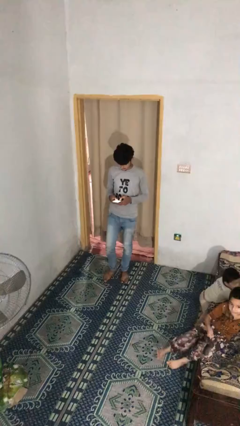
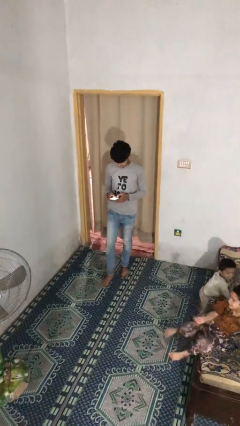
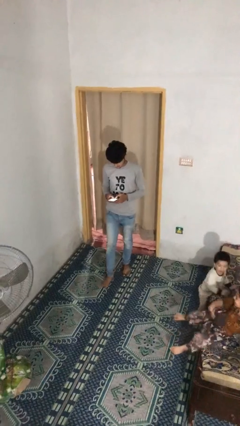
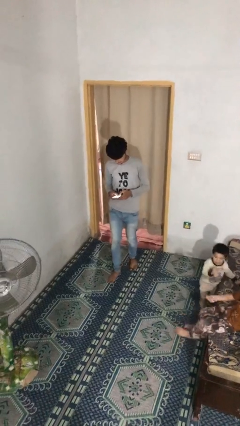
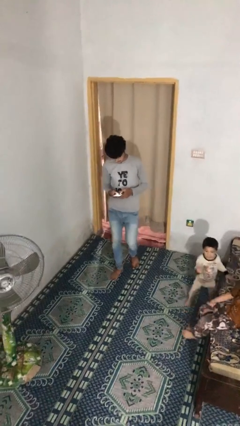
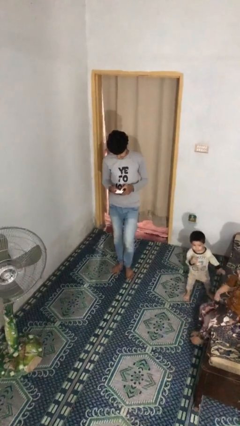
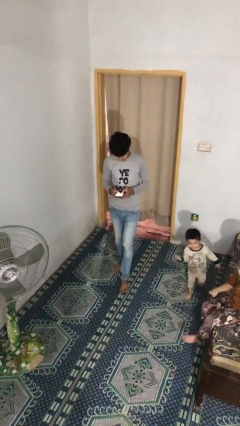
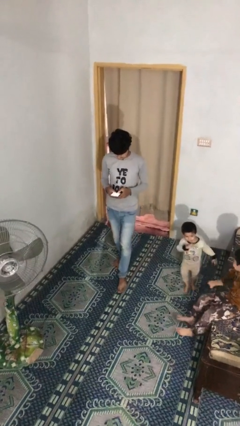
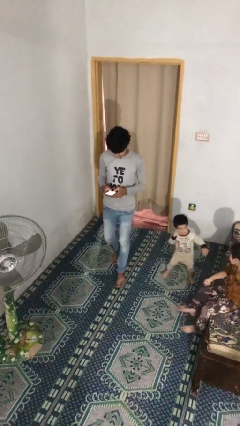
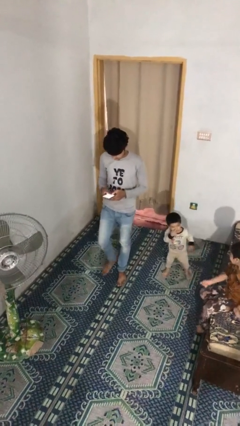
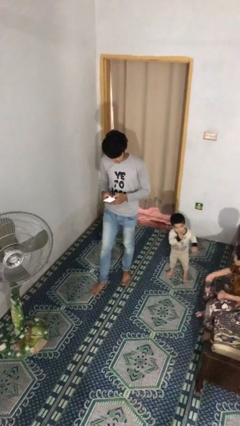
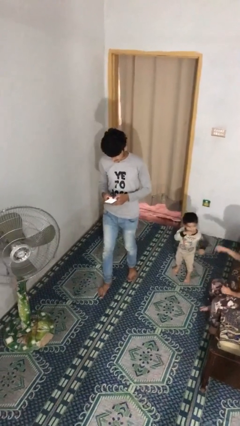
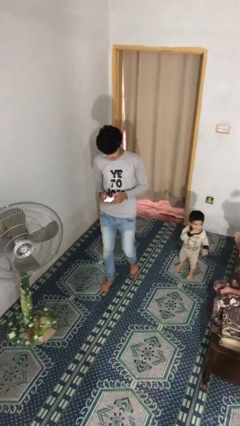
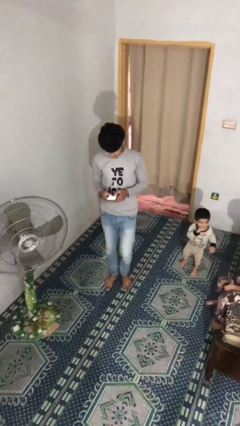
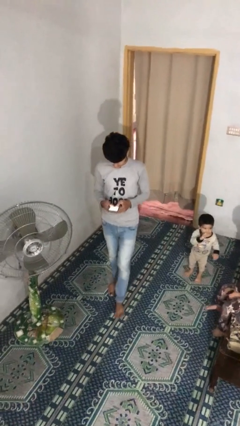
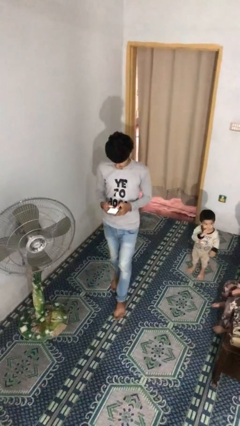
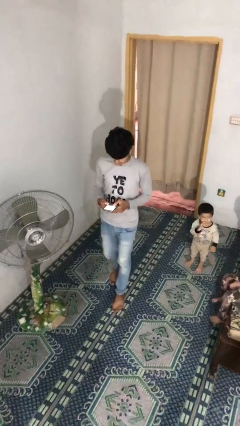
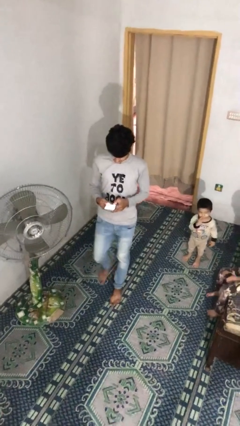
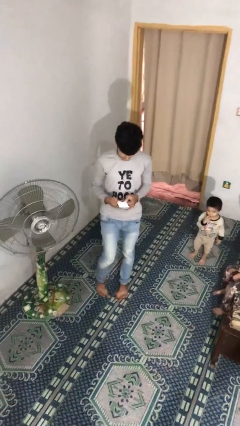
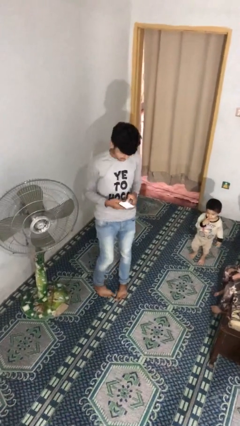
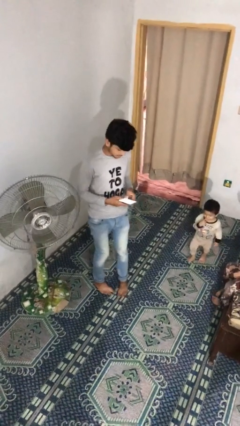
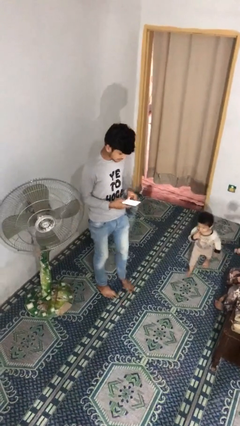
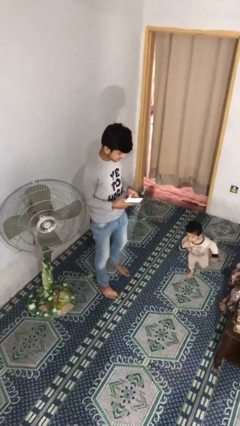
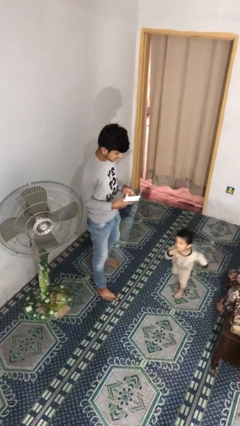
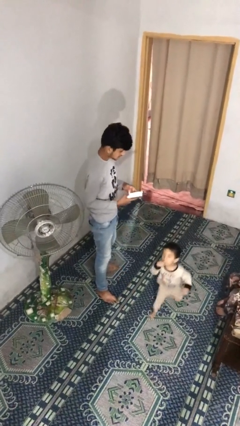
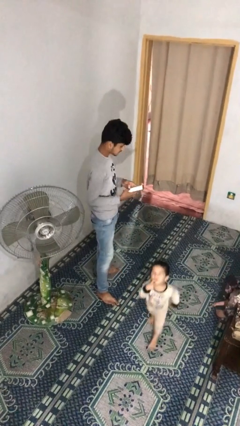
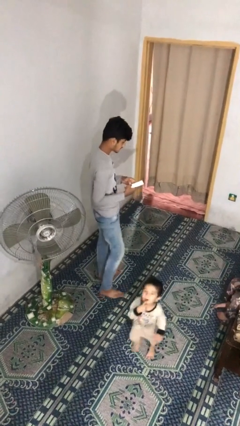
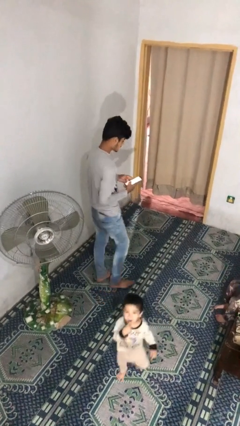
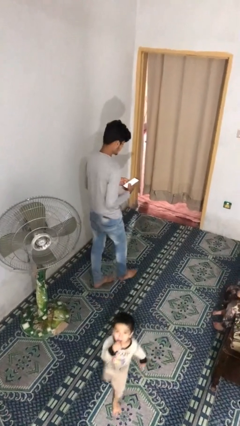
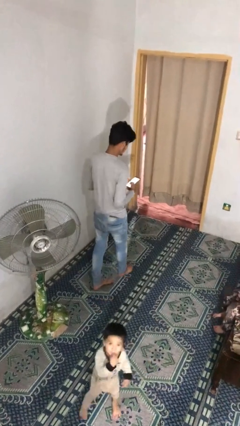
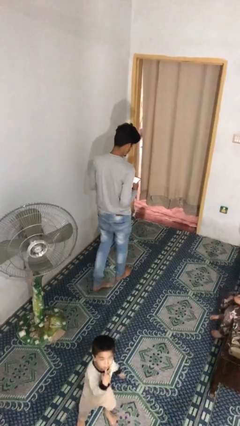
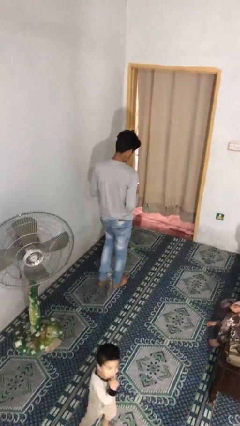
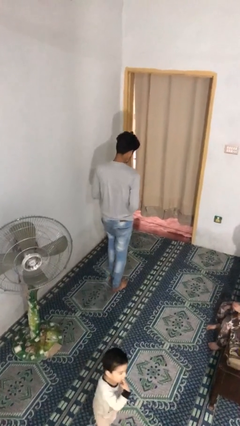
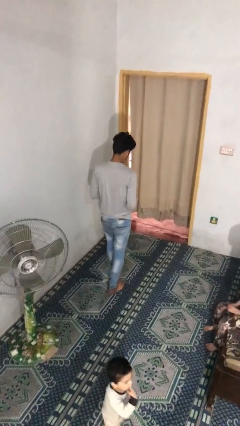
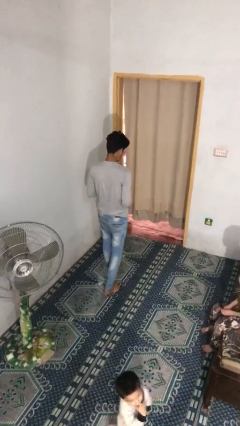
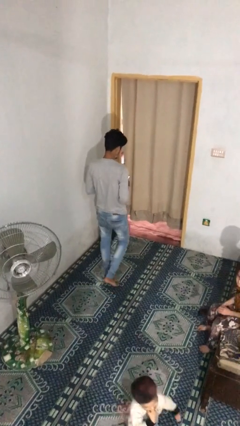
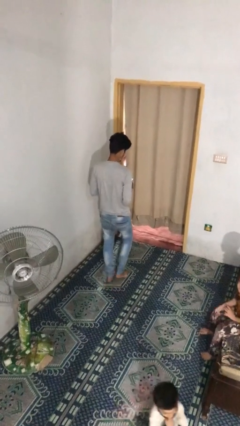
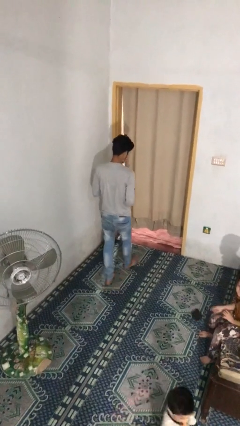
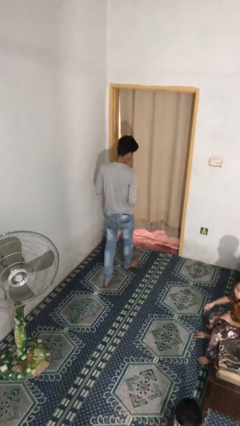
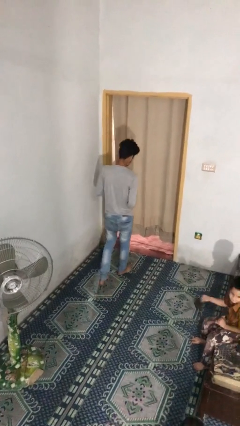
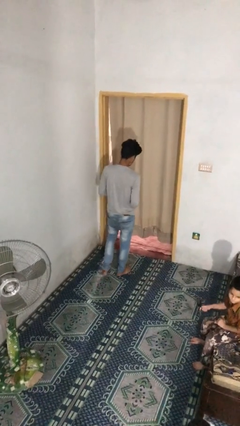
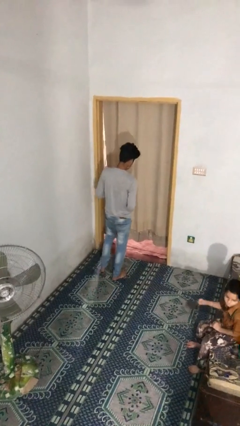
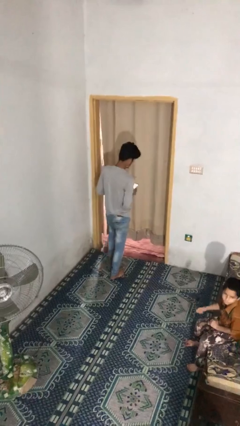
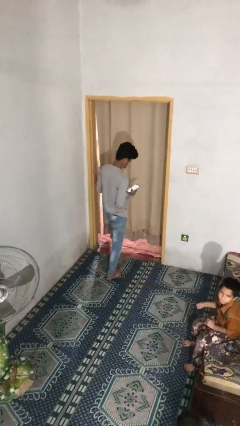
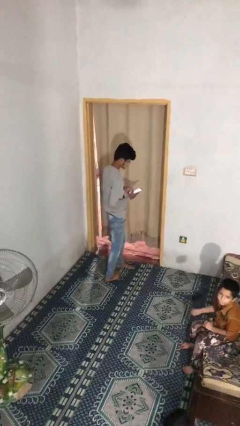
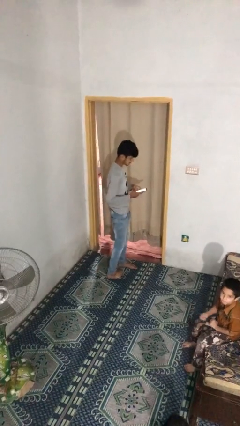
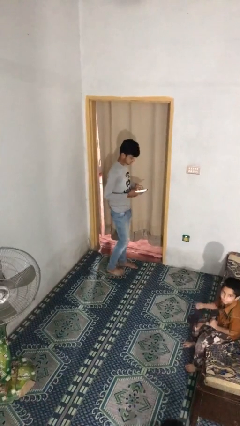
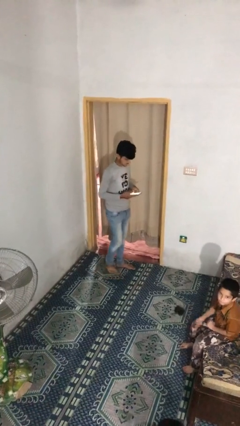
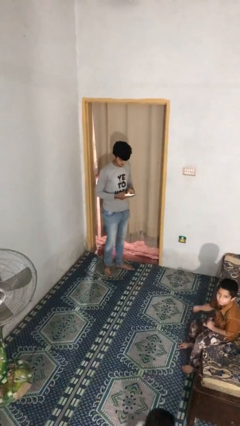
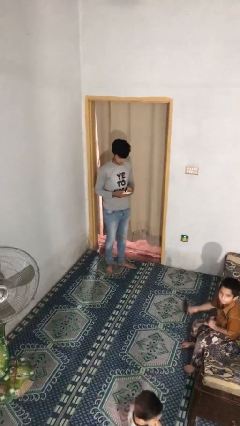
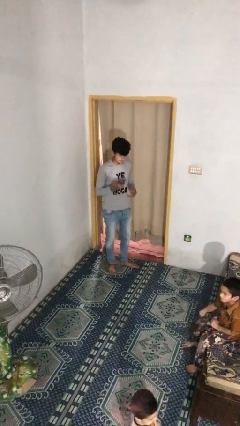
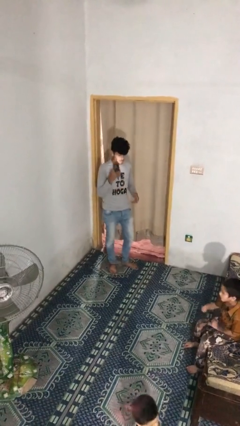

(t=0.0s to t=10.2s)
person texts on phone

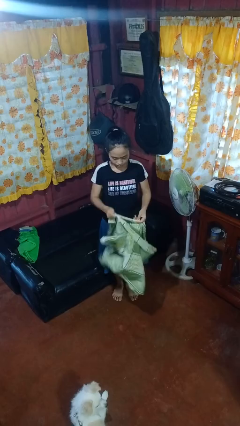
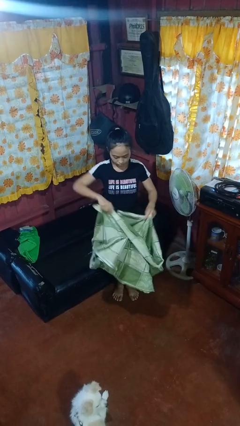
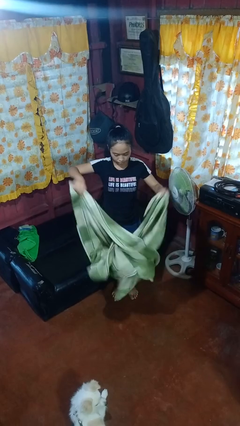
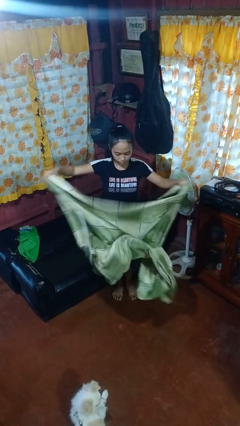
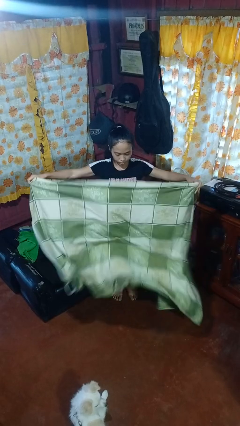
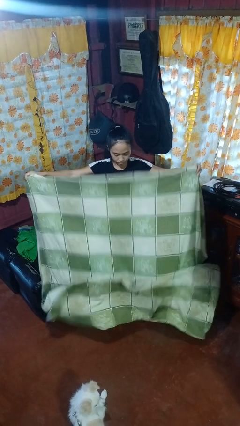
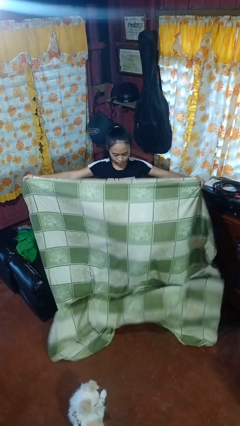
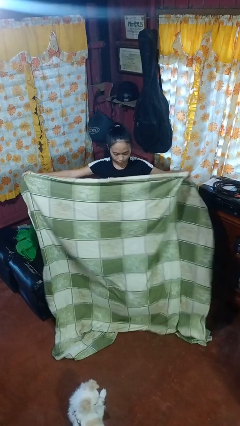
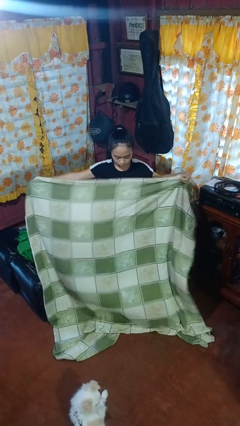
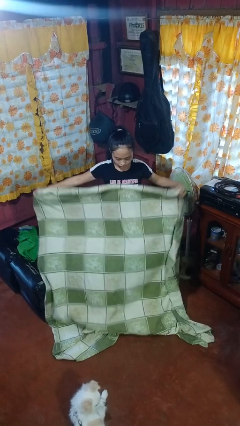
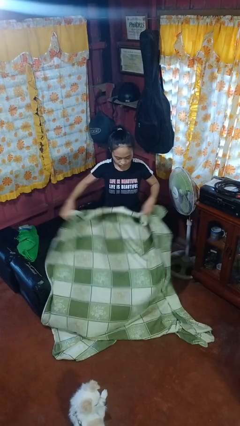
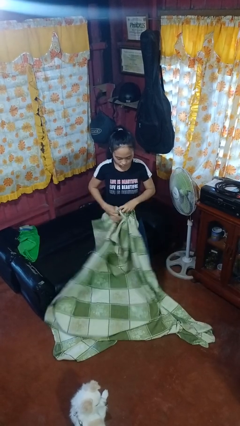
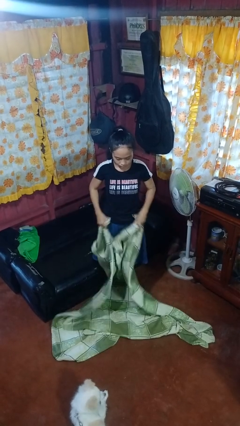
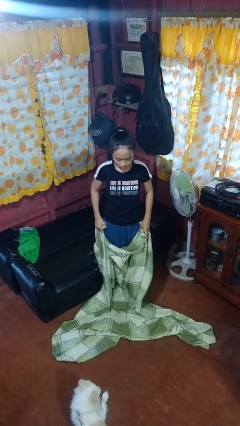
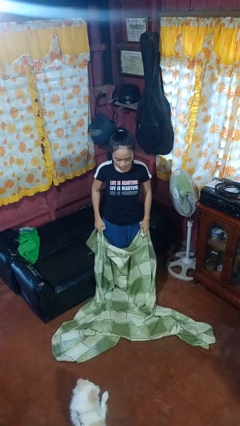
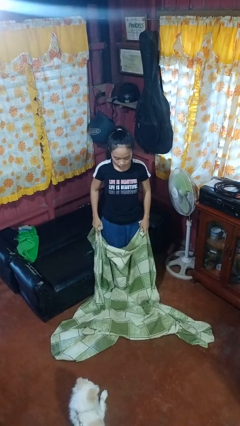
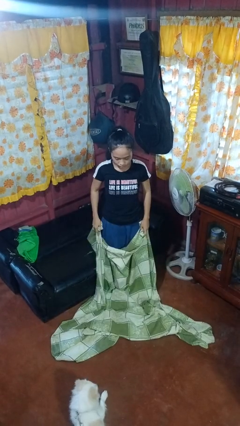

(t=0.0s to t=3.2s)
person unfolds blanket

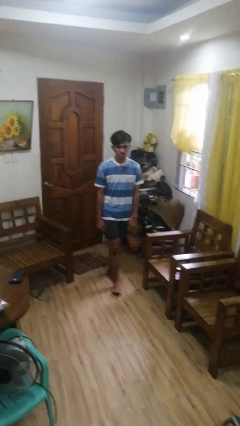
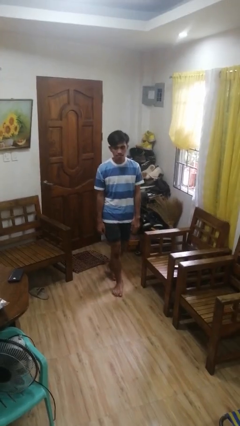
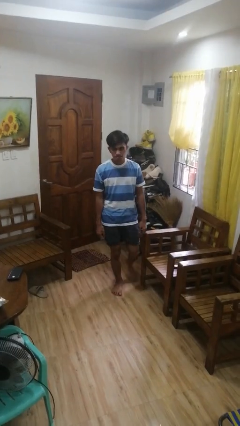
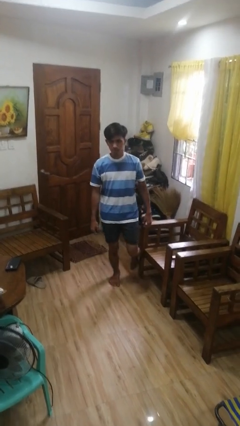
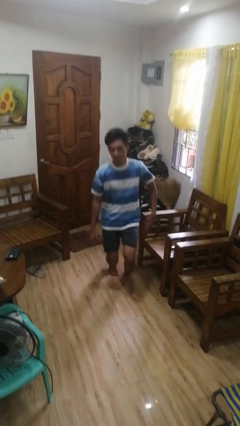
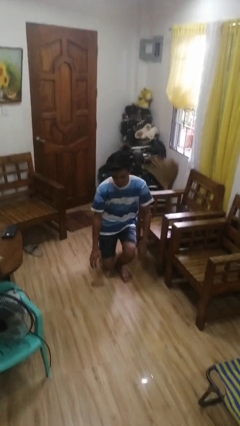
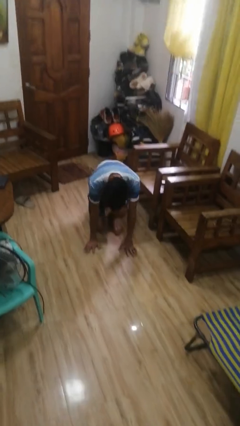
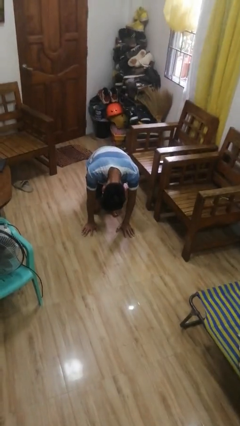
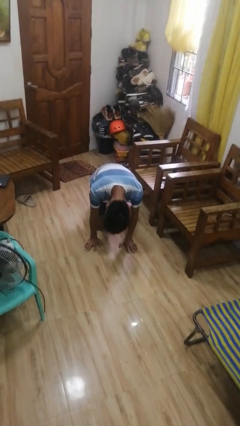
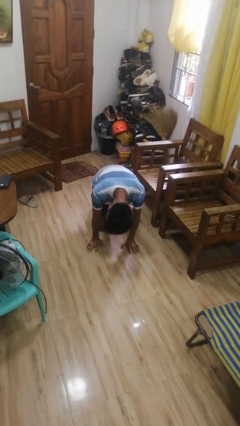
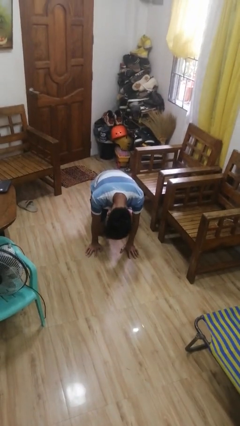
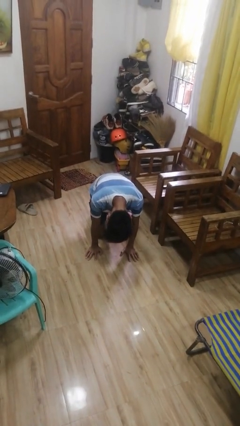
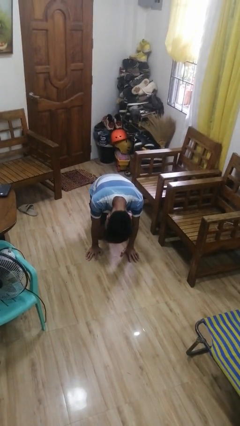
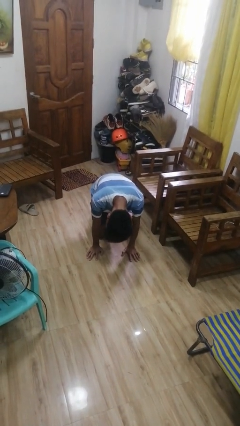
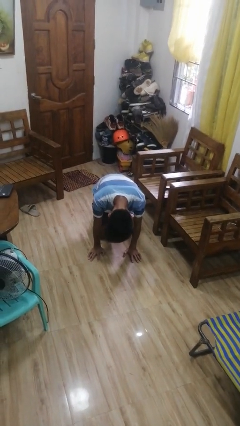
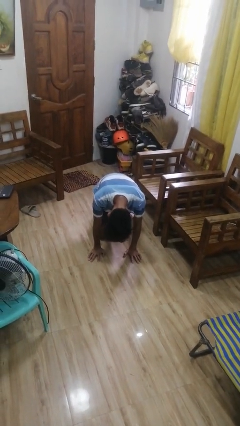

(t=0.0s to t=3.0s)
person trips on object on floor

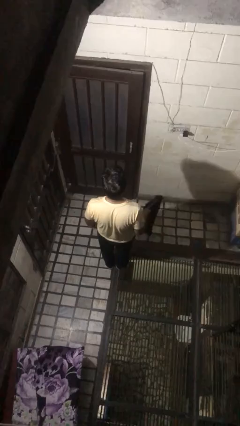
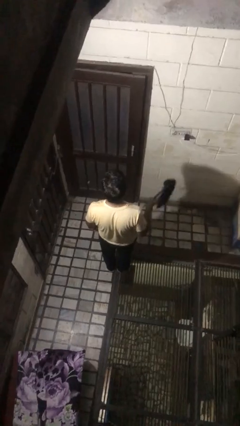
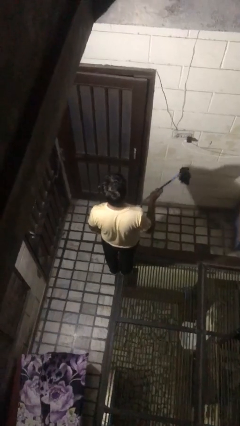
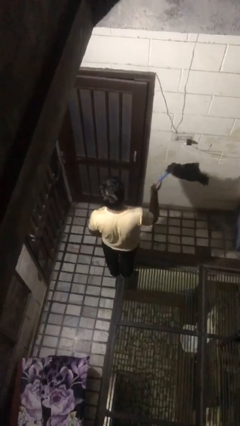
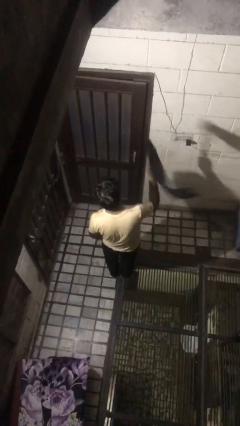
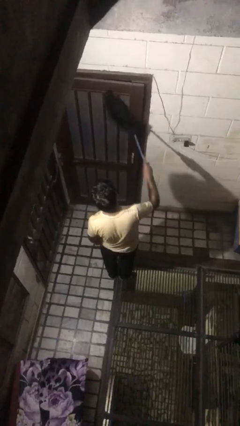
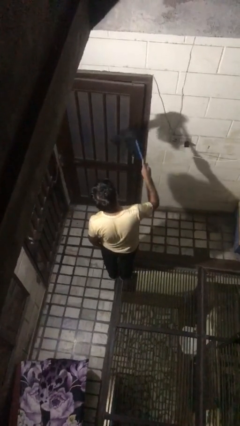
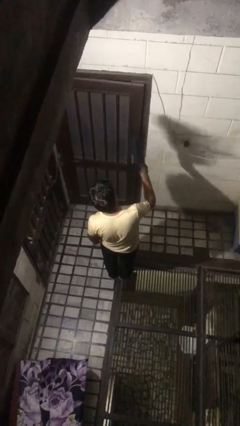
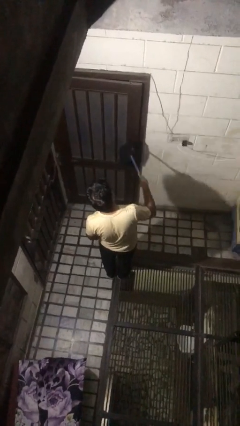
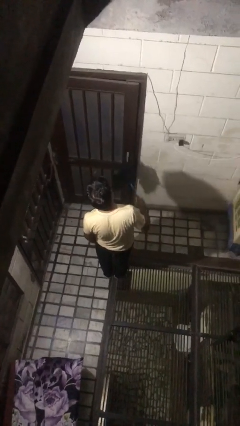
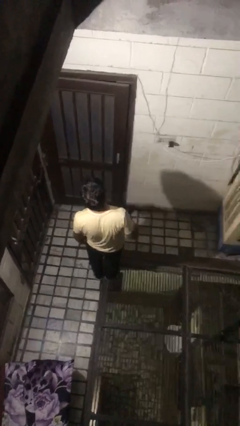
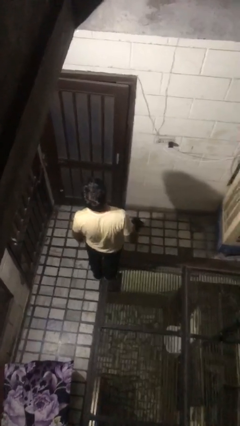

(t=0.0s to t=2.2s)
person dusts furniture
